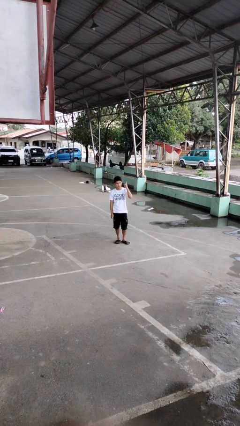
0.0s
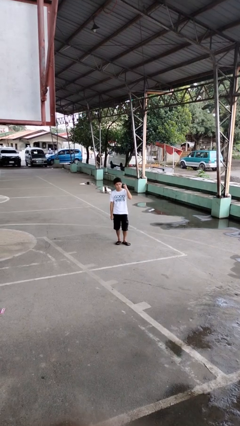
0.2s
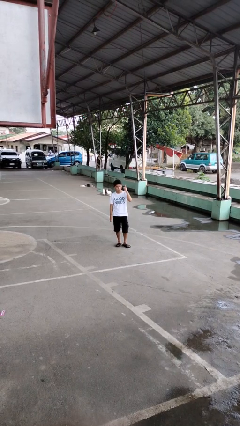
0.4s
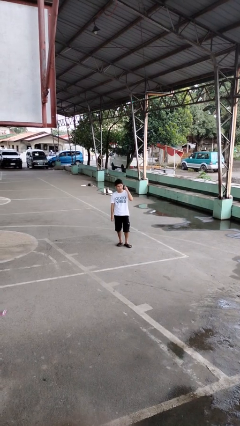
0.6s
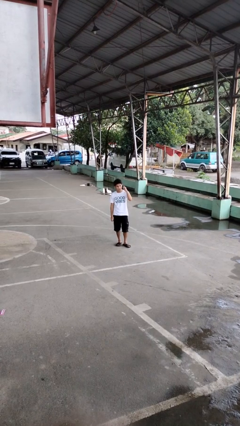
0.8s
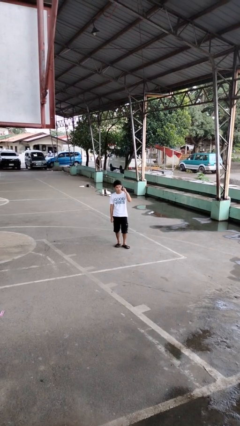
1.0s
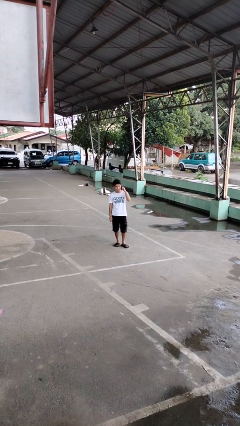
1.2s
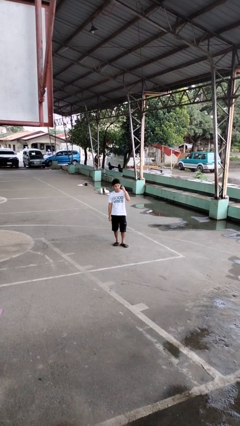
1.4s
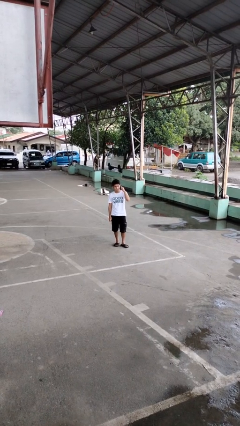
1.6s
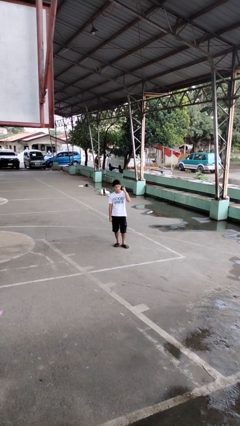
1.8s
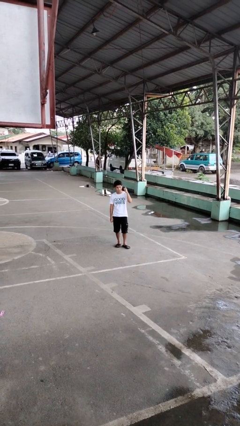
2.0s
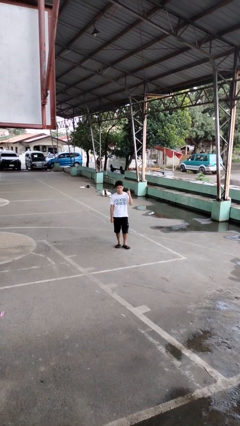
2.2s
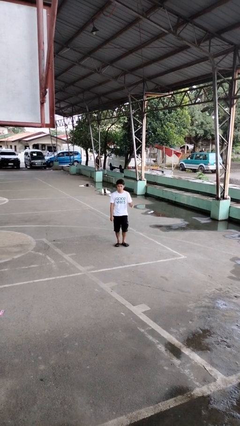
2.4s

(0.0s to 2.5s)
person gestures listen closely

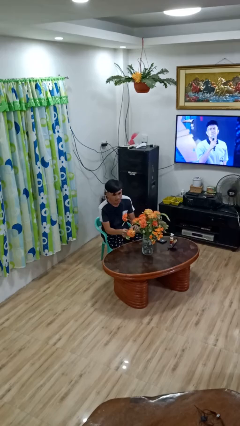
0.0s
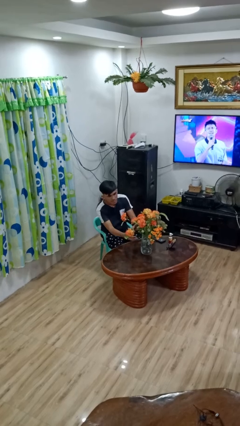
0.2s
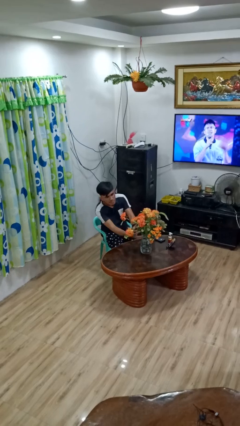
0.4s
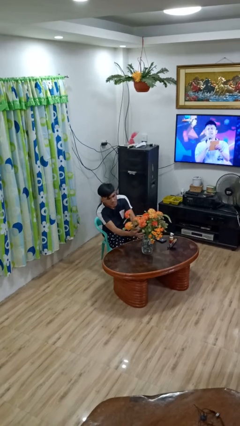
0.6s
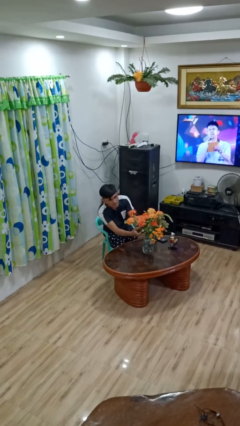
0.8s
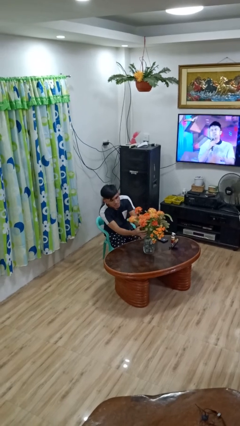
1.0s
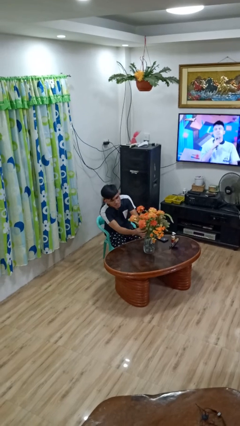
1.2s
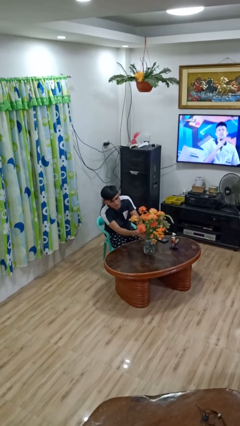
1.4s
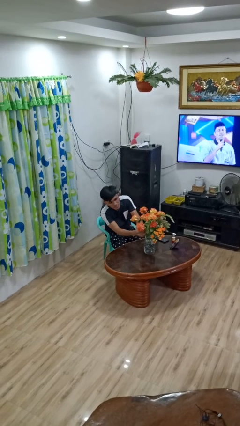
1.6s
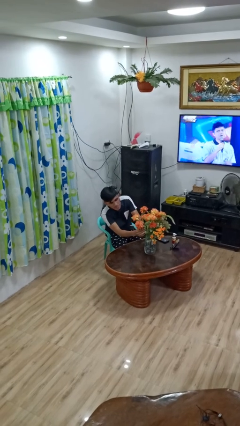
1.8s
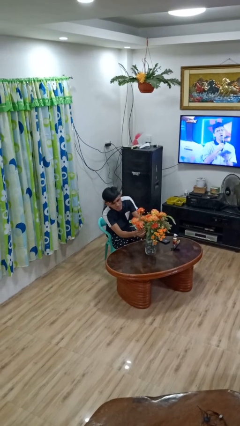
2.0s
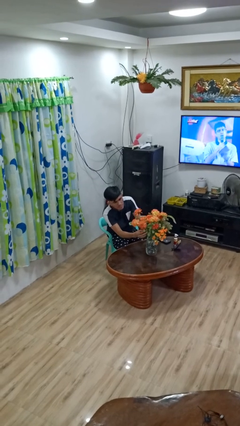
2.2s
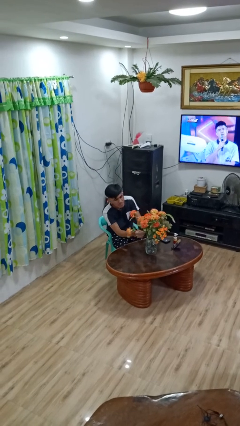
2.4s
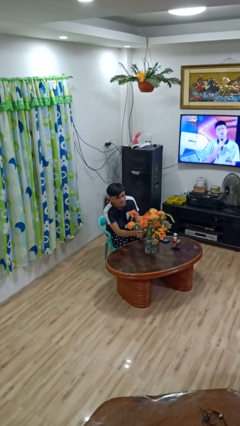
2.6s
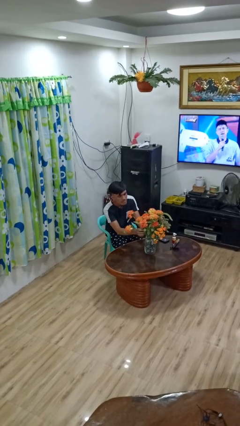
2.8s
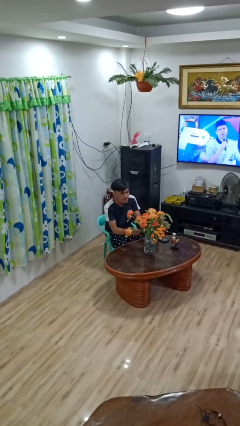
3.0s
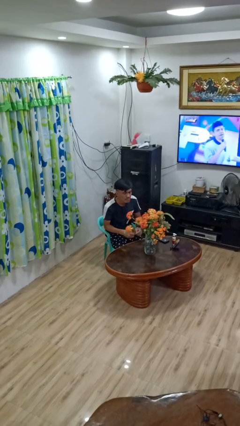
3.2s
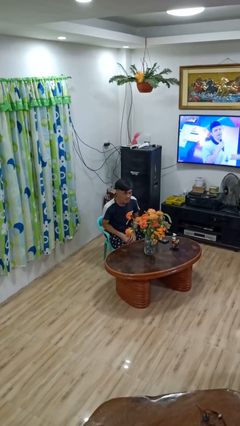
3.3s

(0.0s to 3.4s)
person arranges flowers in vase

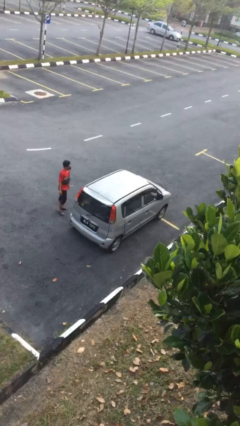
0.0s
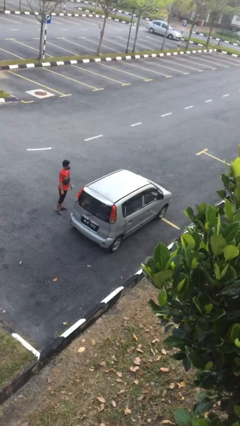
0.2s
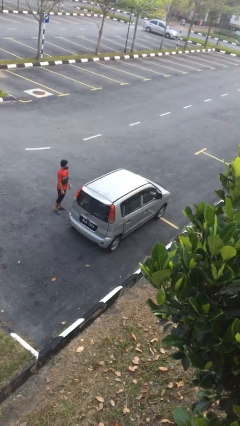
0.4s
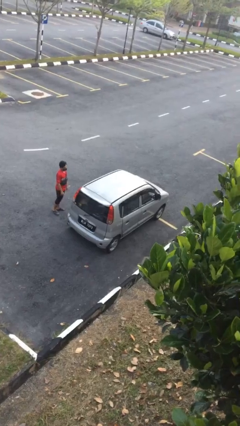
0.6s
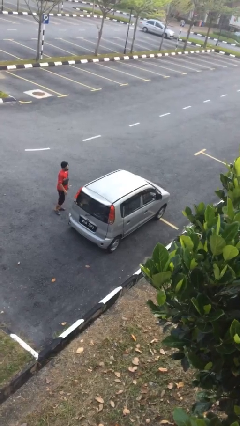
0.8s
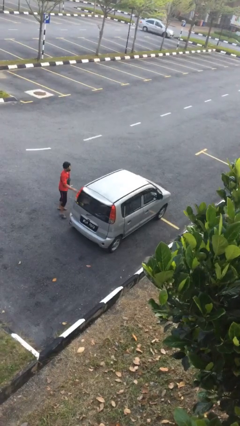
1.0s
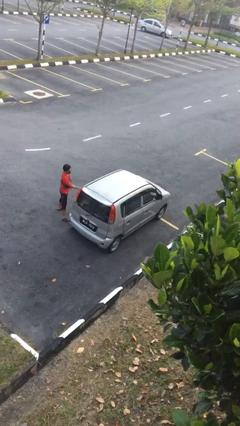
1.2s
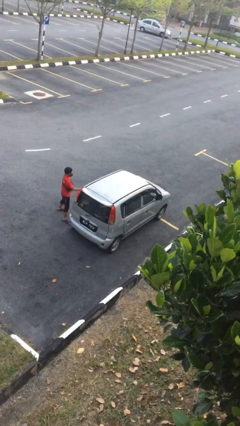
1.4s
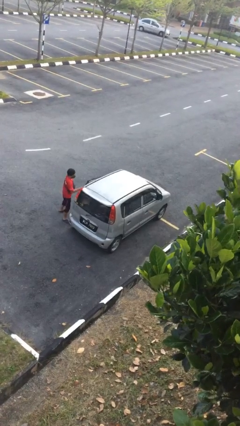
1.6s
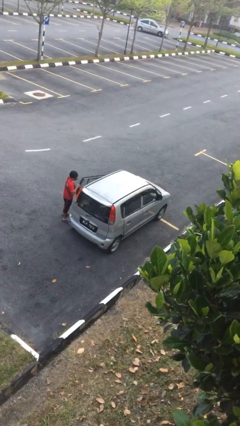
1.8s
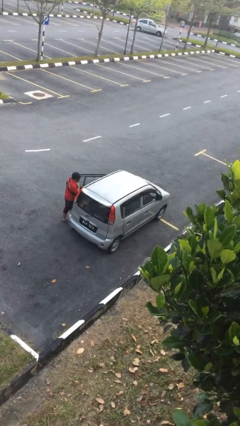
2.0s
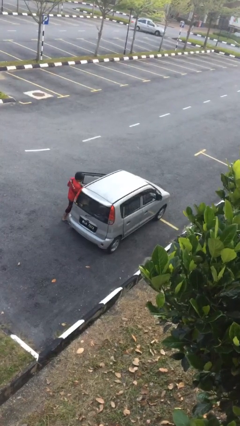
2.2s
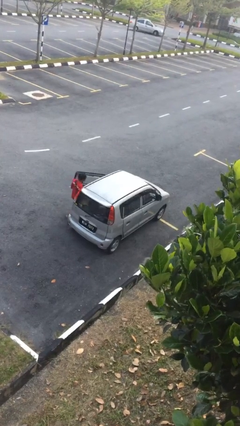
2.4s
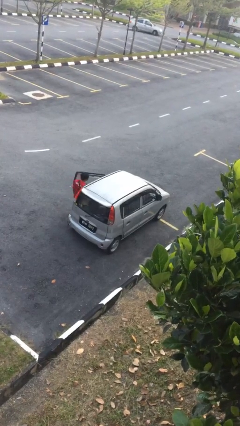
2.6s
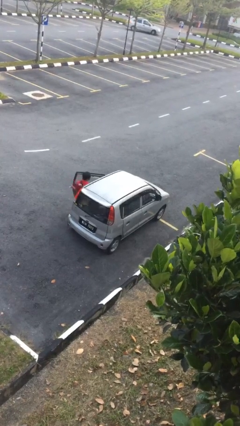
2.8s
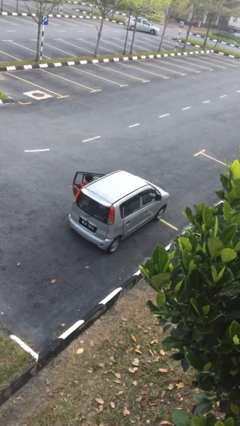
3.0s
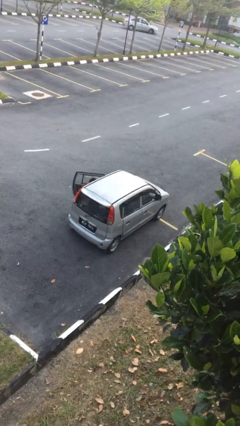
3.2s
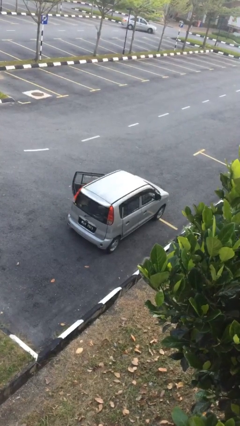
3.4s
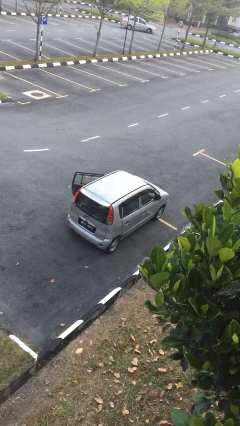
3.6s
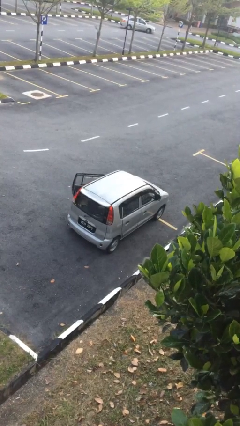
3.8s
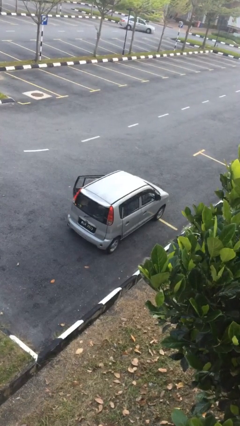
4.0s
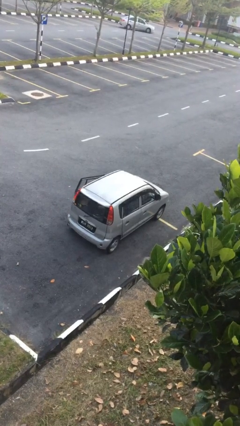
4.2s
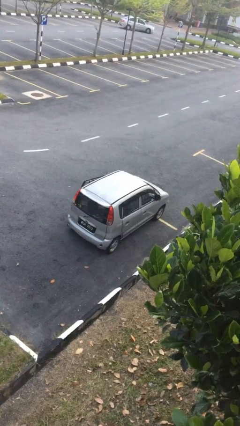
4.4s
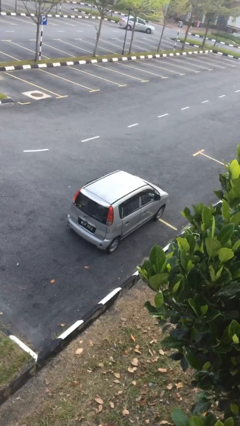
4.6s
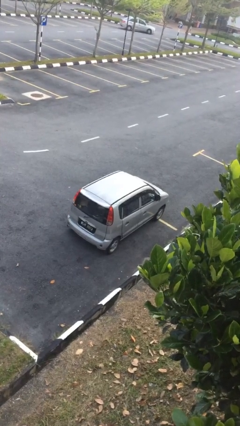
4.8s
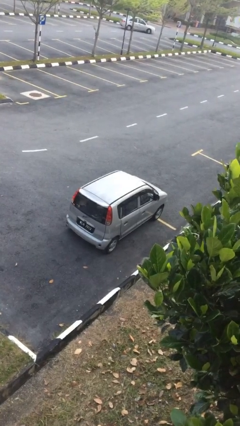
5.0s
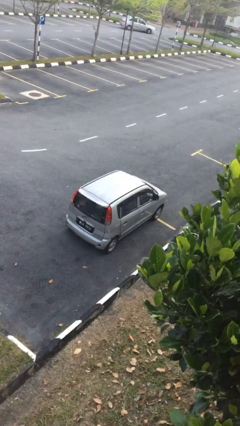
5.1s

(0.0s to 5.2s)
car picks up person

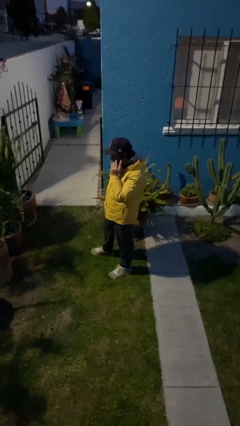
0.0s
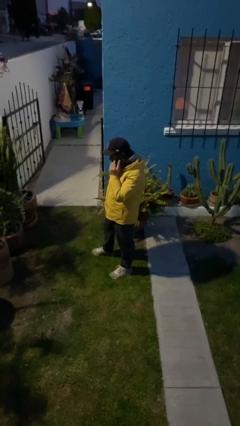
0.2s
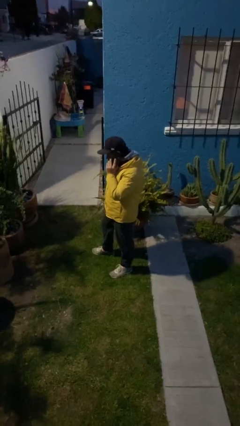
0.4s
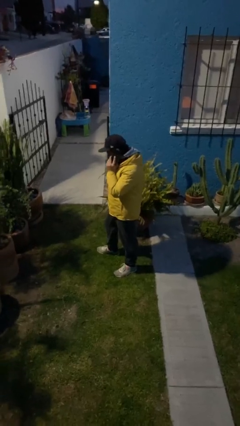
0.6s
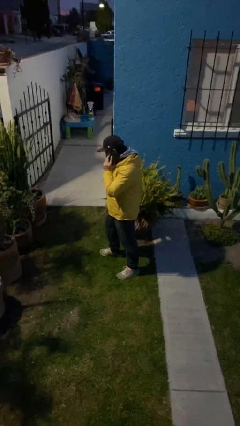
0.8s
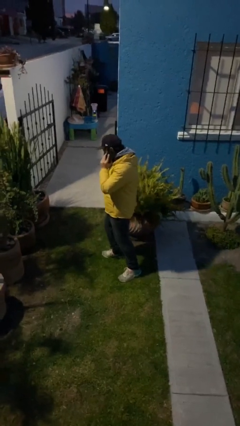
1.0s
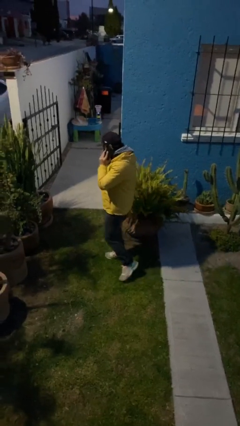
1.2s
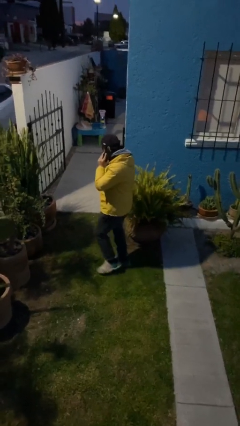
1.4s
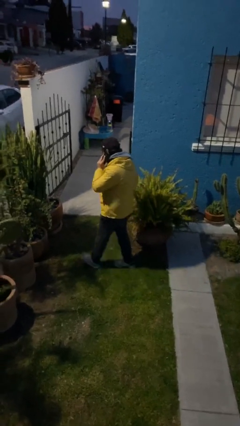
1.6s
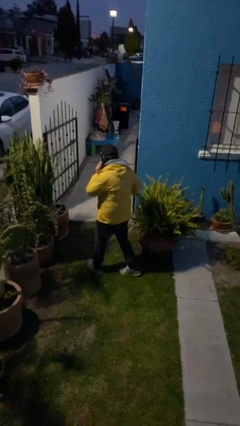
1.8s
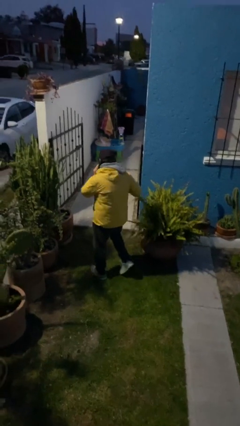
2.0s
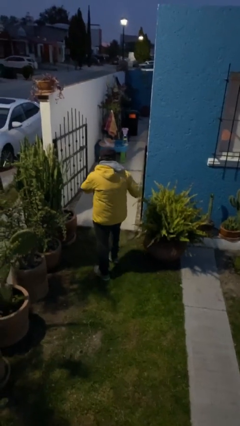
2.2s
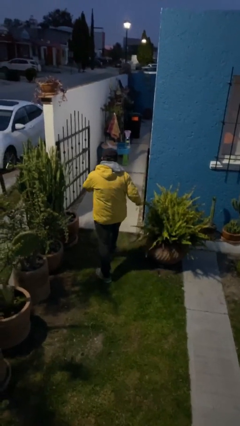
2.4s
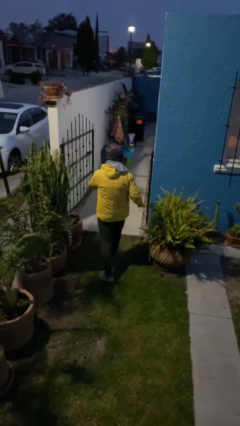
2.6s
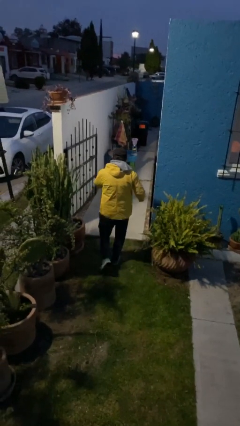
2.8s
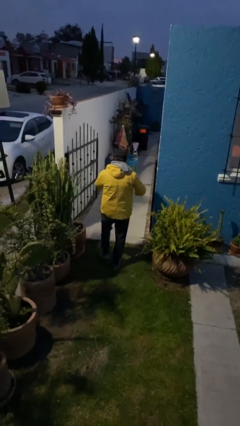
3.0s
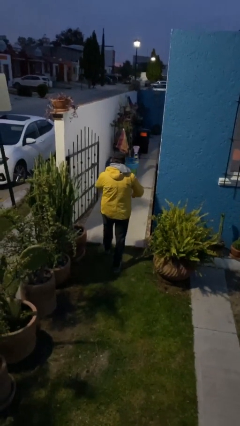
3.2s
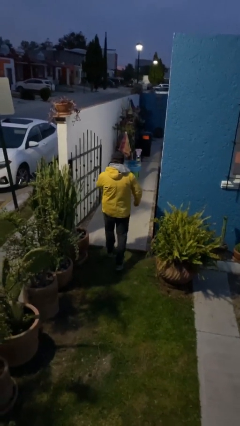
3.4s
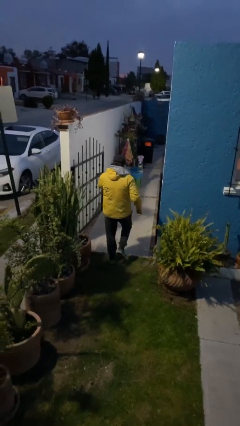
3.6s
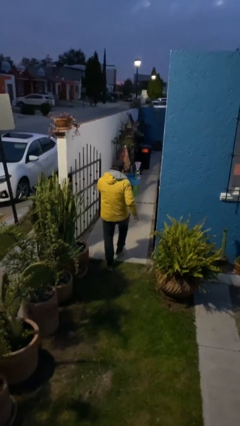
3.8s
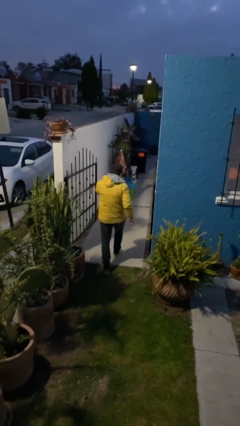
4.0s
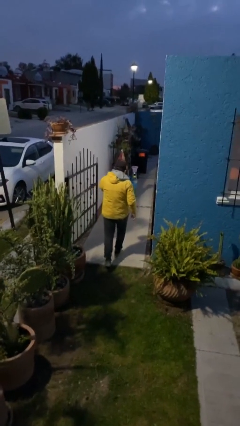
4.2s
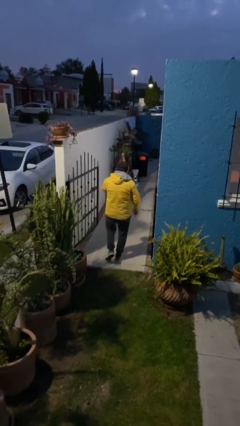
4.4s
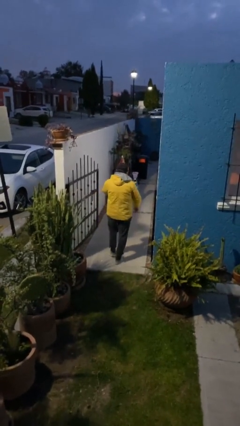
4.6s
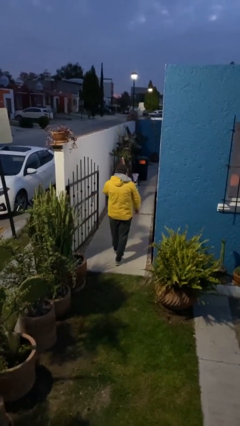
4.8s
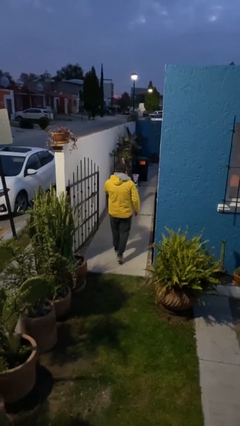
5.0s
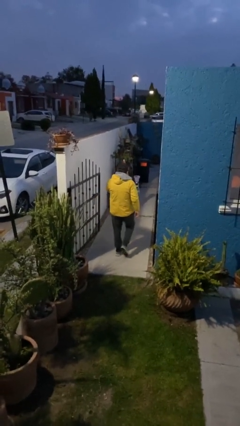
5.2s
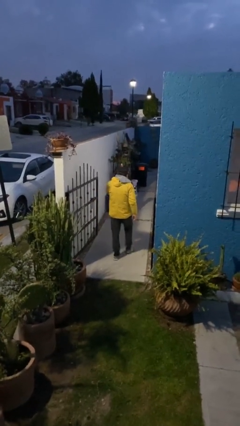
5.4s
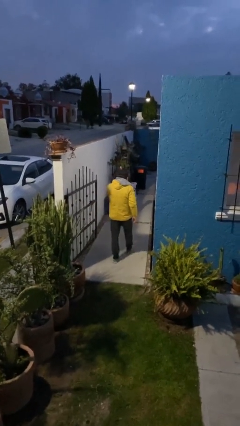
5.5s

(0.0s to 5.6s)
person exits scene through structure

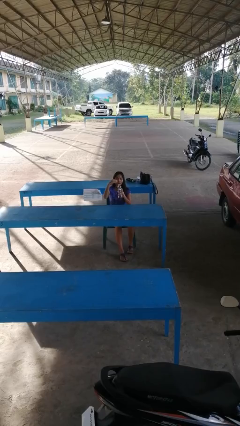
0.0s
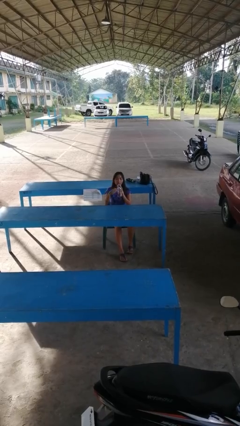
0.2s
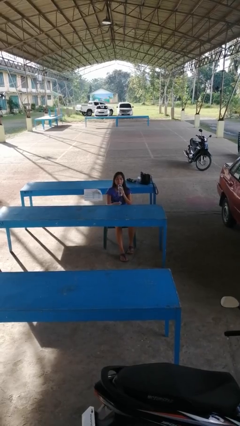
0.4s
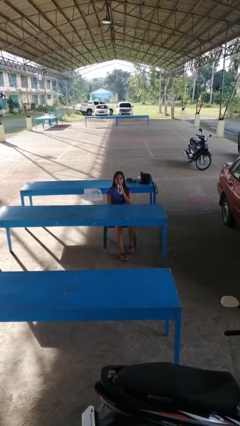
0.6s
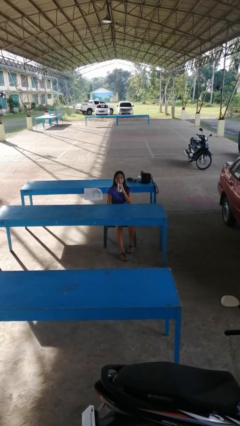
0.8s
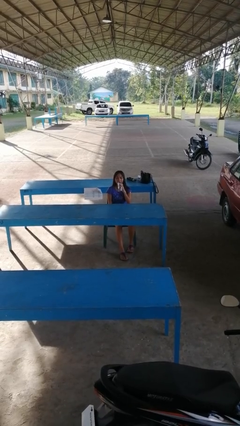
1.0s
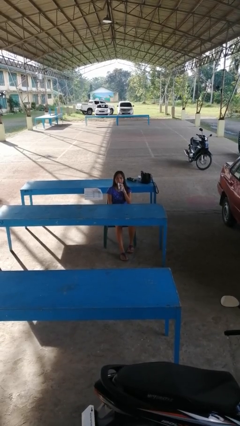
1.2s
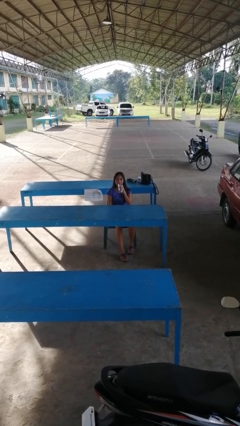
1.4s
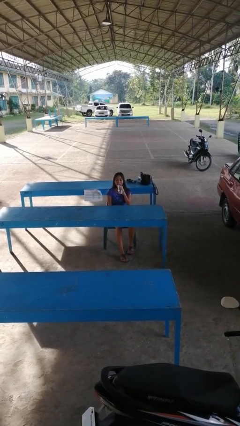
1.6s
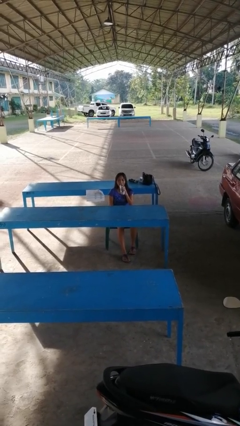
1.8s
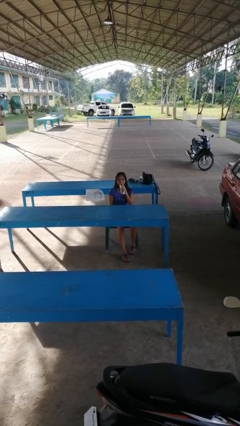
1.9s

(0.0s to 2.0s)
person drinks from bottle
